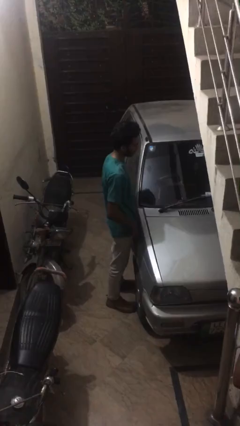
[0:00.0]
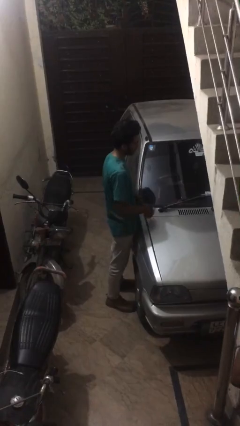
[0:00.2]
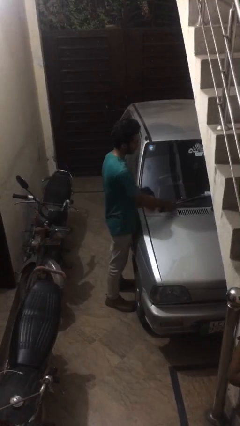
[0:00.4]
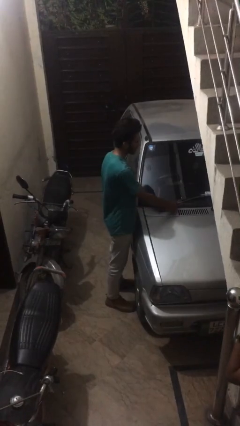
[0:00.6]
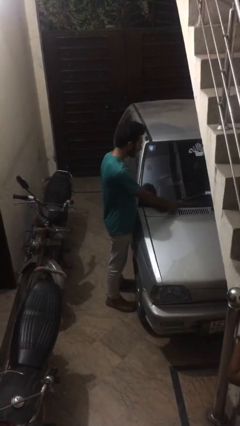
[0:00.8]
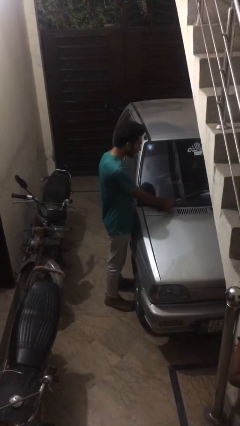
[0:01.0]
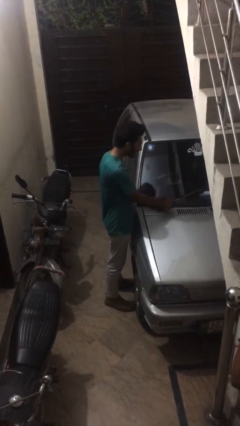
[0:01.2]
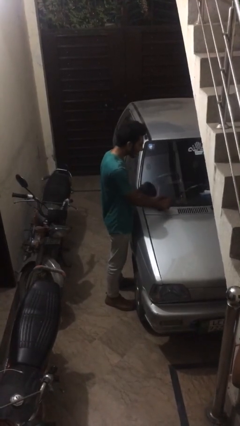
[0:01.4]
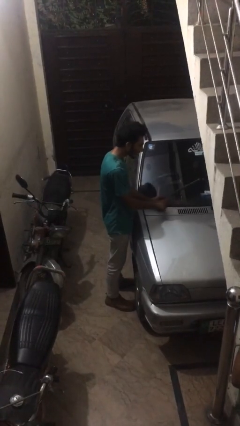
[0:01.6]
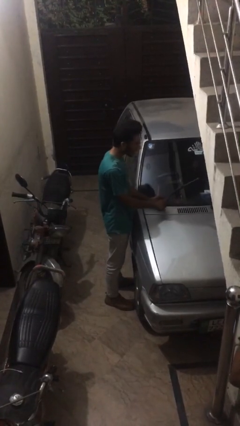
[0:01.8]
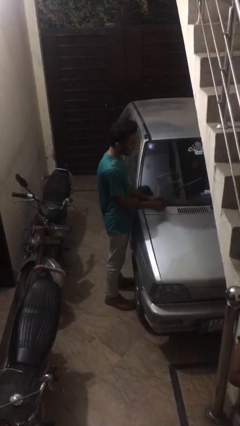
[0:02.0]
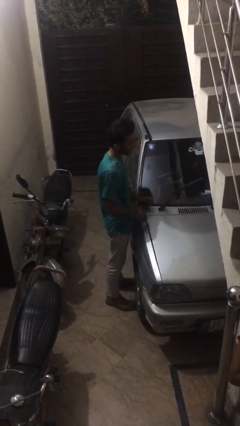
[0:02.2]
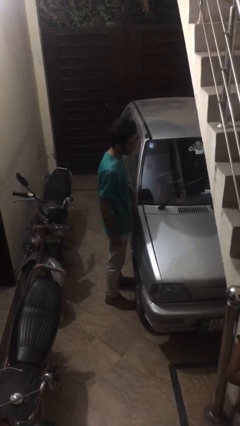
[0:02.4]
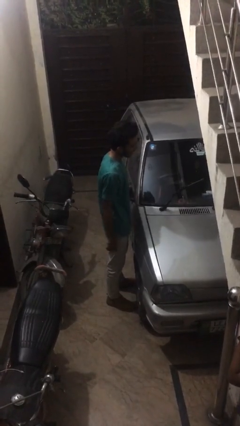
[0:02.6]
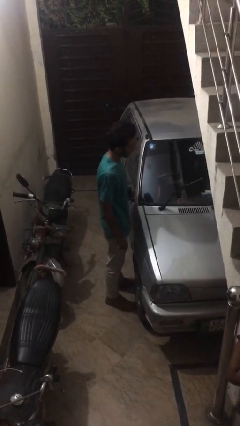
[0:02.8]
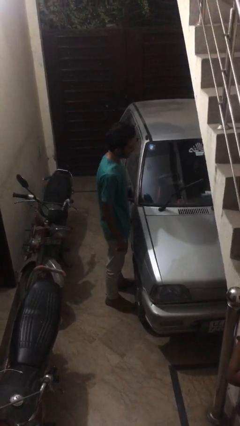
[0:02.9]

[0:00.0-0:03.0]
person flips up car wipers

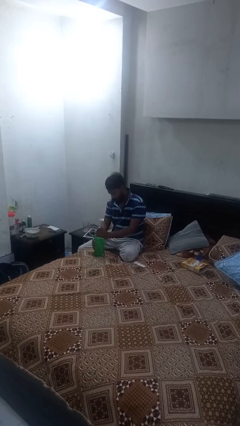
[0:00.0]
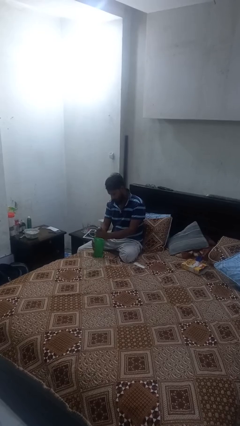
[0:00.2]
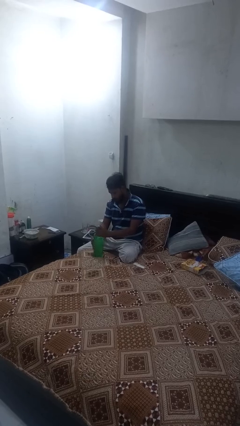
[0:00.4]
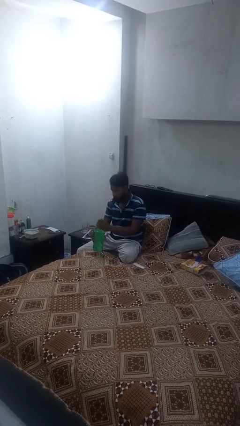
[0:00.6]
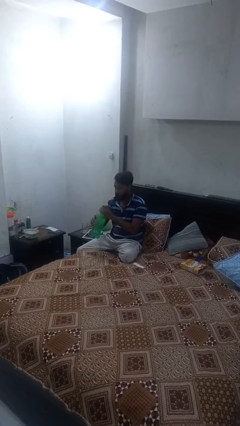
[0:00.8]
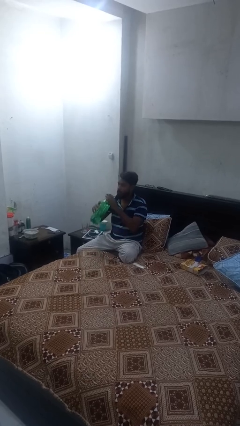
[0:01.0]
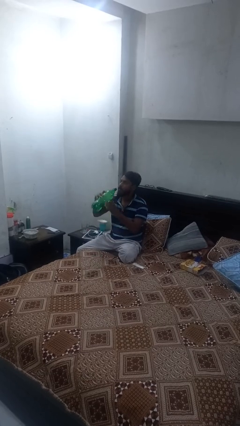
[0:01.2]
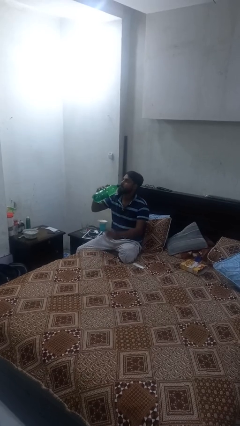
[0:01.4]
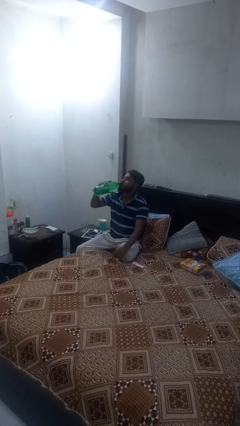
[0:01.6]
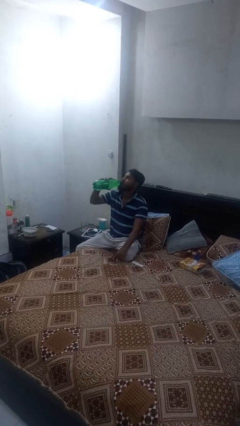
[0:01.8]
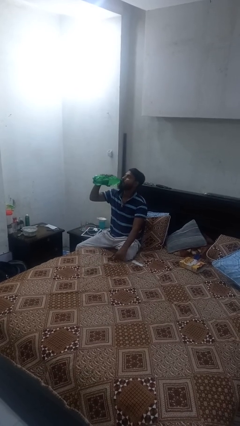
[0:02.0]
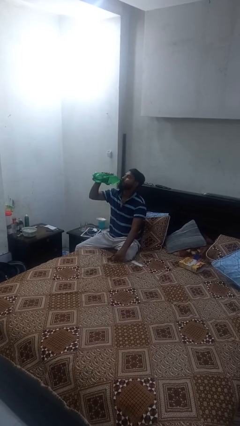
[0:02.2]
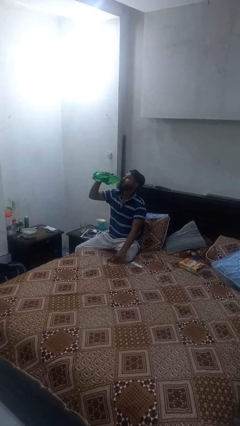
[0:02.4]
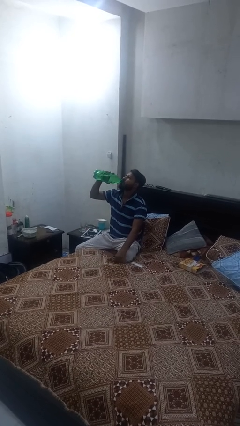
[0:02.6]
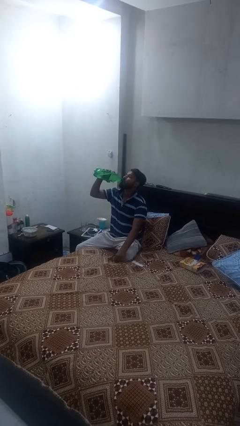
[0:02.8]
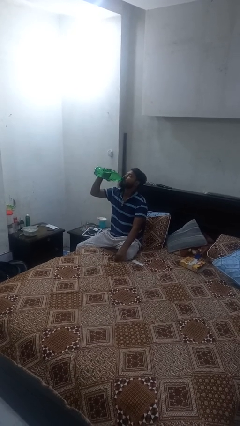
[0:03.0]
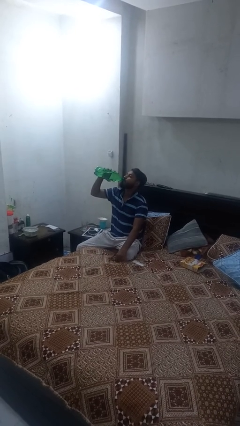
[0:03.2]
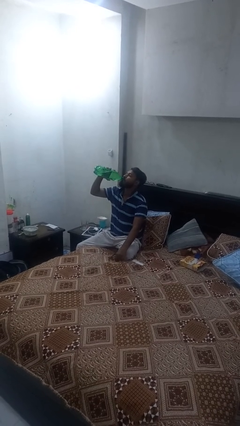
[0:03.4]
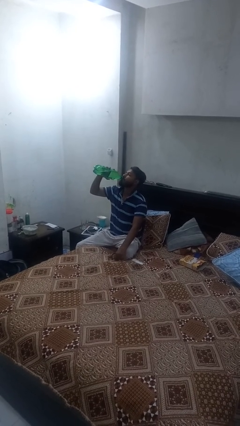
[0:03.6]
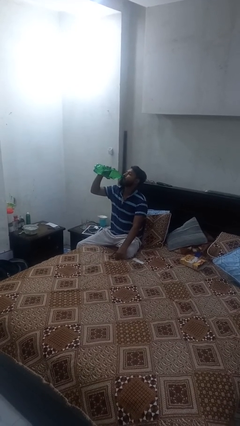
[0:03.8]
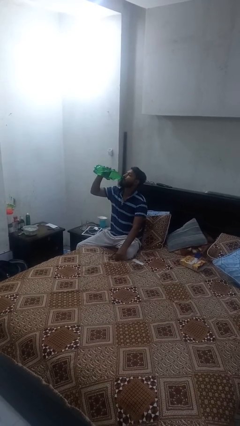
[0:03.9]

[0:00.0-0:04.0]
person drinks from bottle

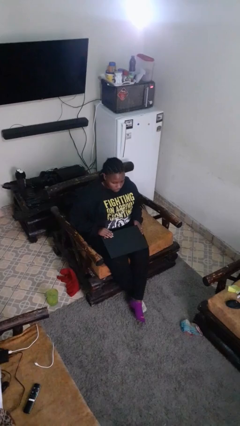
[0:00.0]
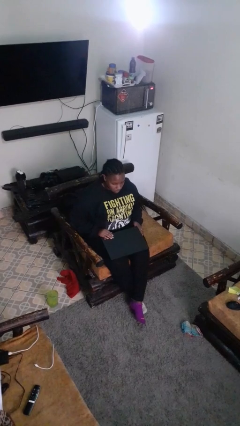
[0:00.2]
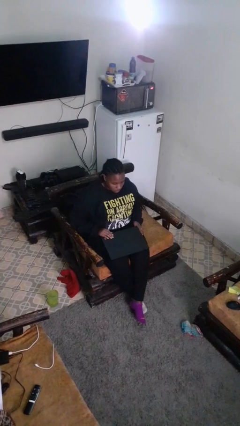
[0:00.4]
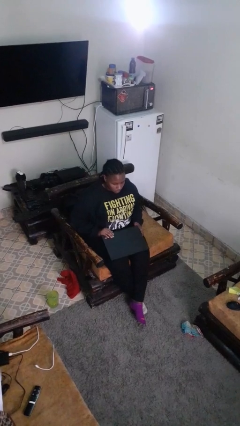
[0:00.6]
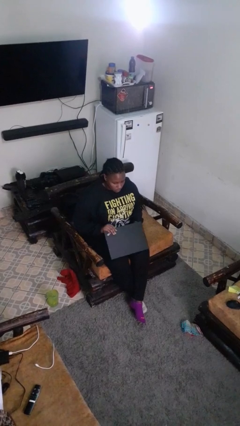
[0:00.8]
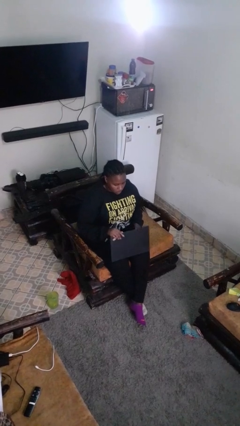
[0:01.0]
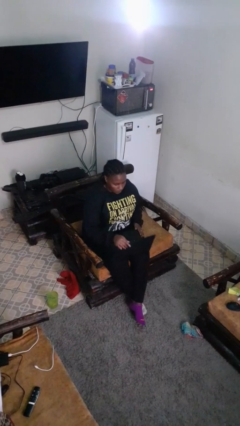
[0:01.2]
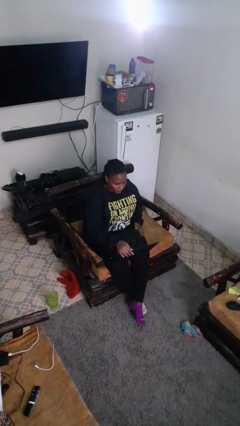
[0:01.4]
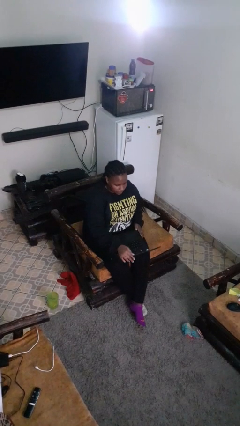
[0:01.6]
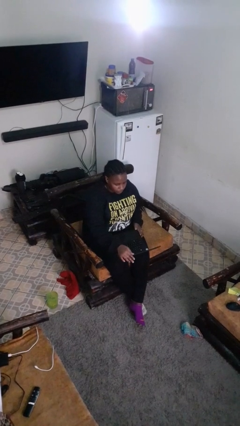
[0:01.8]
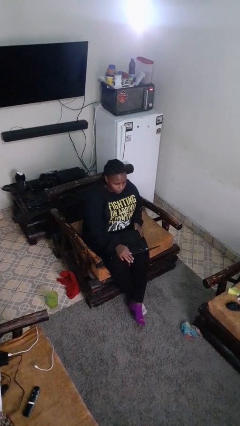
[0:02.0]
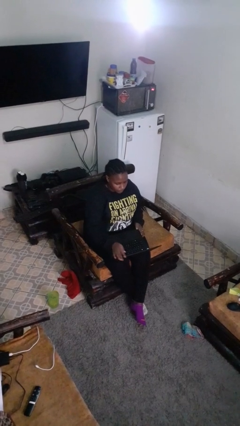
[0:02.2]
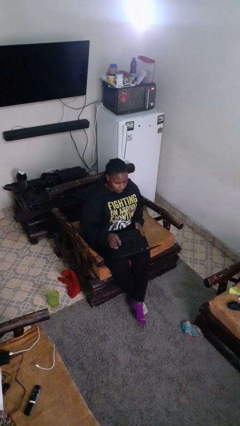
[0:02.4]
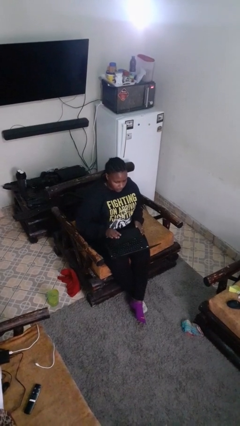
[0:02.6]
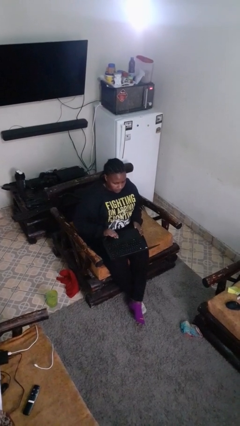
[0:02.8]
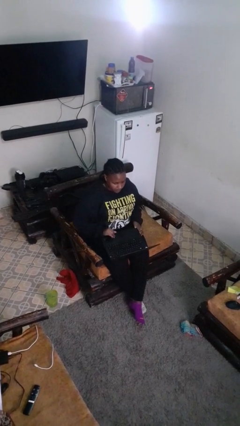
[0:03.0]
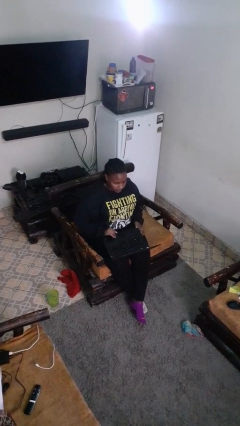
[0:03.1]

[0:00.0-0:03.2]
person opens laptop

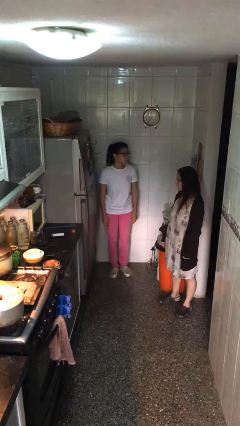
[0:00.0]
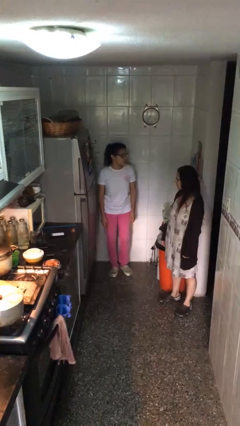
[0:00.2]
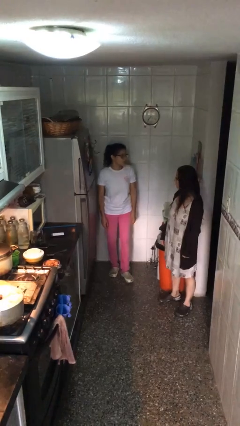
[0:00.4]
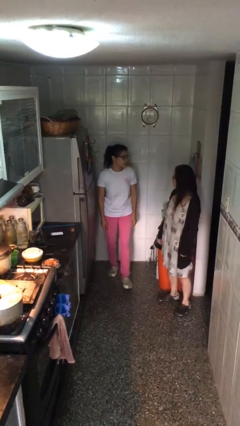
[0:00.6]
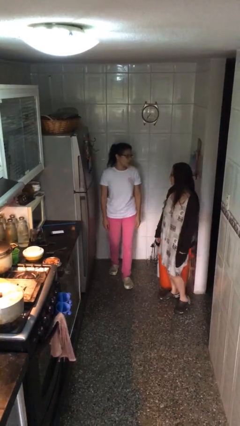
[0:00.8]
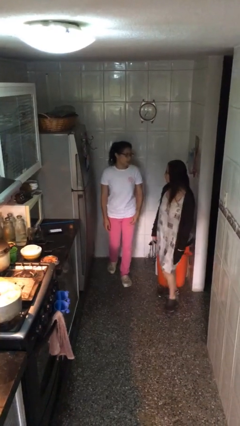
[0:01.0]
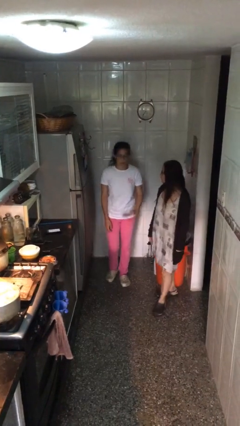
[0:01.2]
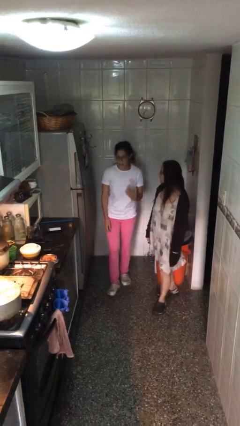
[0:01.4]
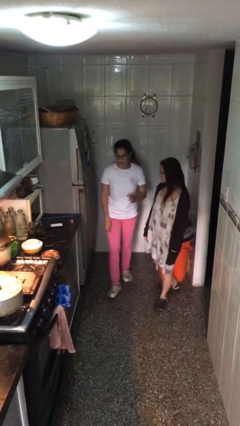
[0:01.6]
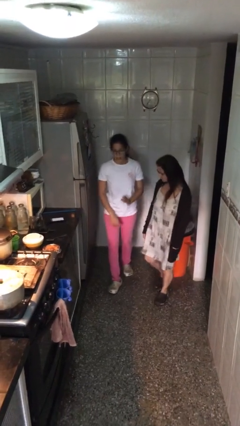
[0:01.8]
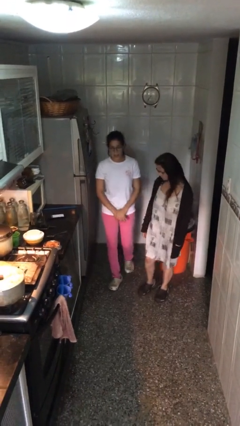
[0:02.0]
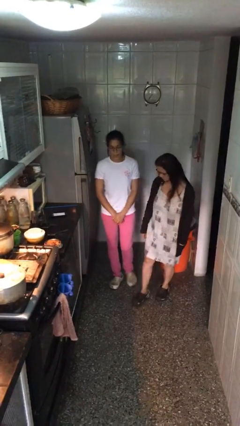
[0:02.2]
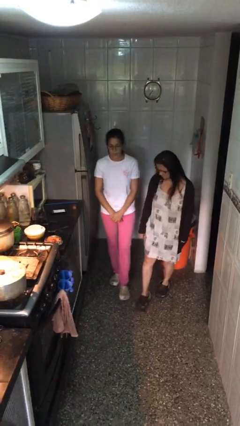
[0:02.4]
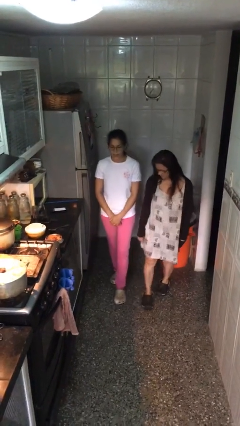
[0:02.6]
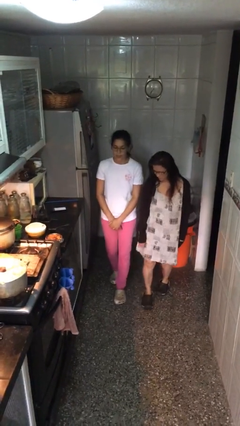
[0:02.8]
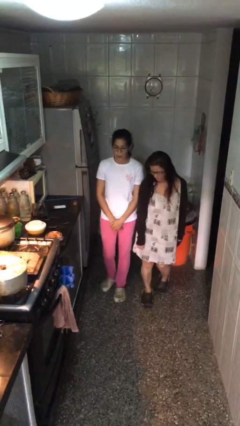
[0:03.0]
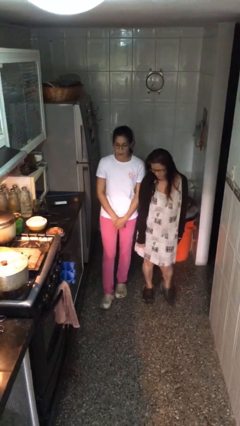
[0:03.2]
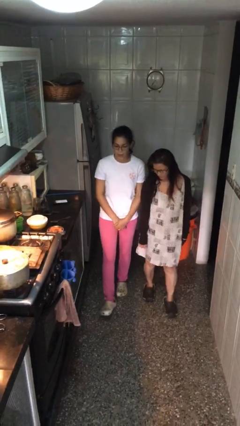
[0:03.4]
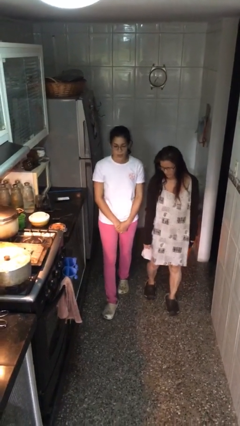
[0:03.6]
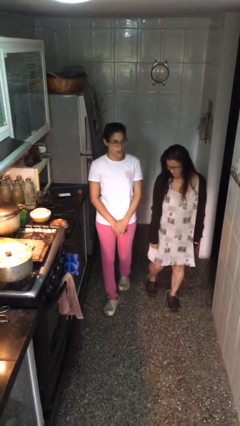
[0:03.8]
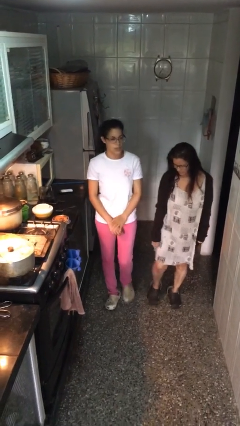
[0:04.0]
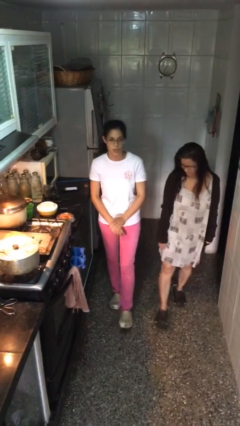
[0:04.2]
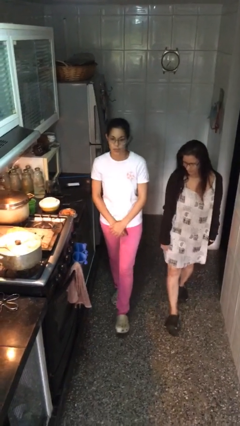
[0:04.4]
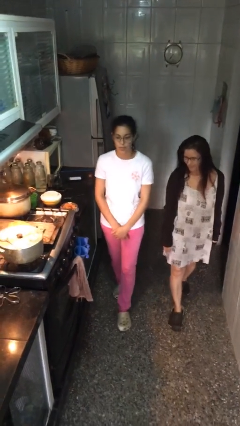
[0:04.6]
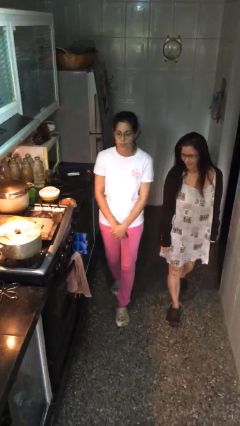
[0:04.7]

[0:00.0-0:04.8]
person talks to person

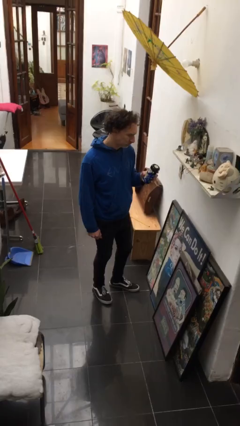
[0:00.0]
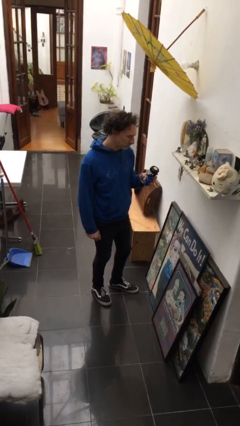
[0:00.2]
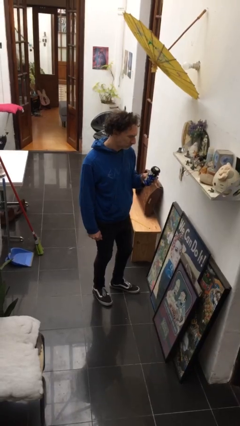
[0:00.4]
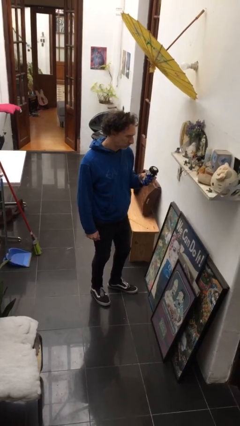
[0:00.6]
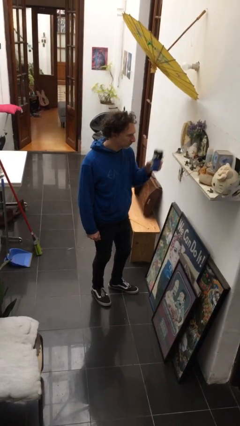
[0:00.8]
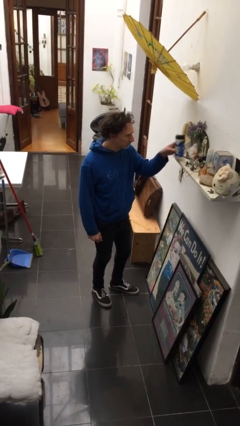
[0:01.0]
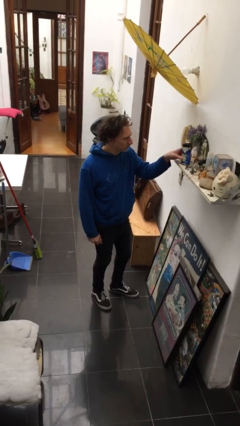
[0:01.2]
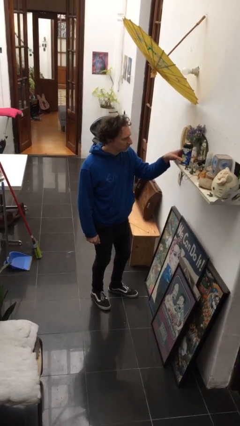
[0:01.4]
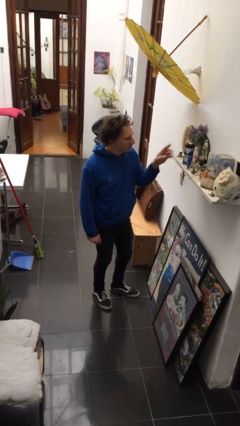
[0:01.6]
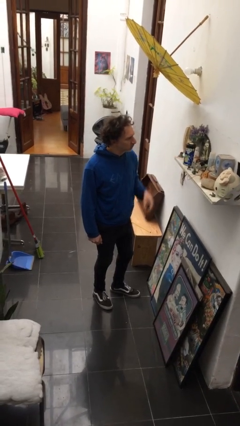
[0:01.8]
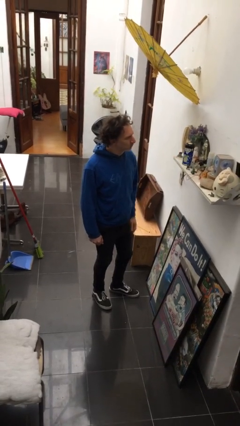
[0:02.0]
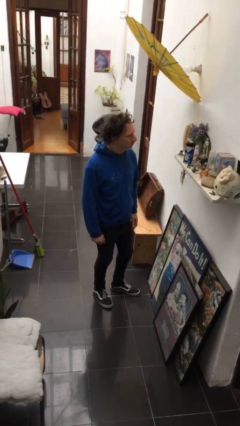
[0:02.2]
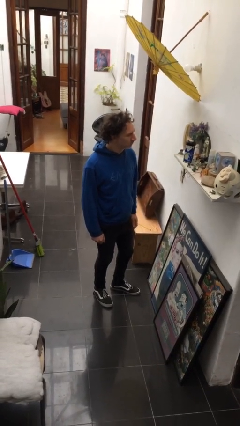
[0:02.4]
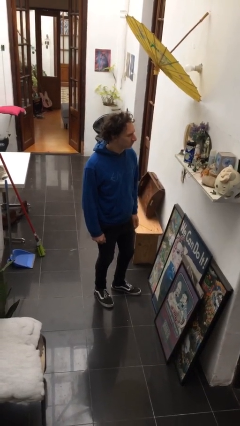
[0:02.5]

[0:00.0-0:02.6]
person puts down object on shelf

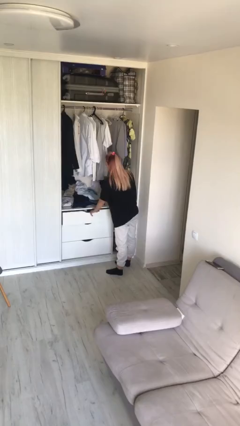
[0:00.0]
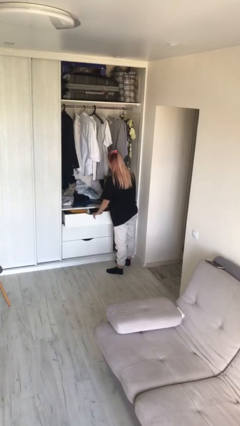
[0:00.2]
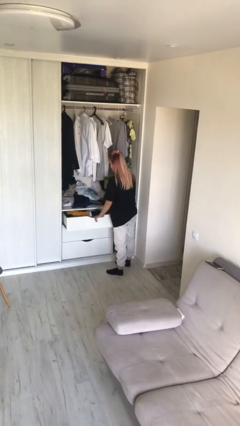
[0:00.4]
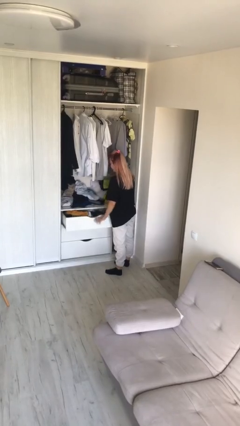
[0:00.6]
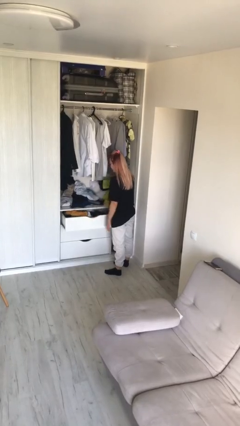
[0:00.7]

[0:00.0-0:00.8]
person opens dresser drawer
